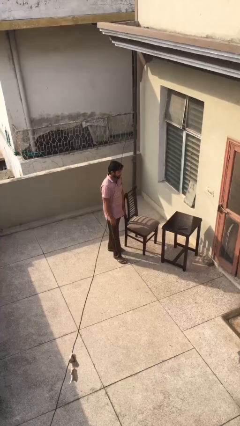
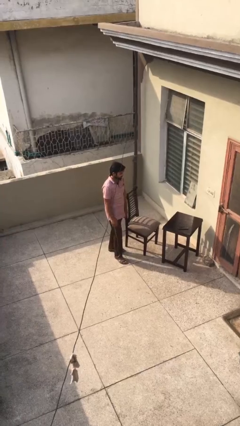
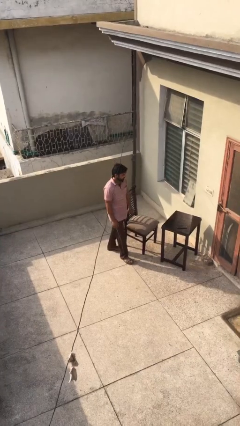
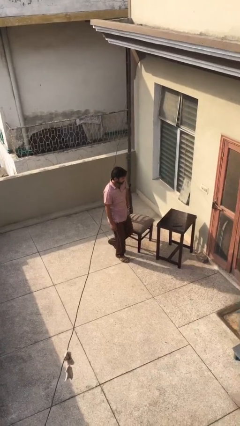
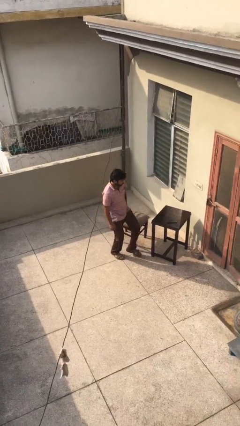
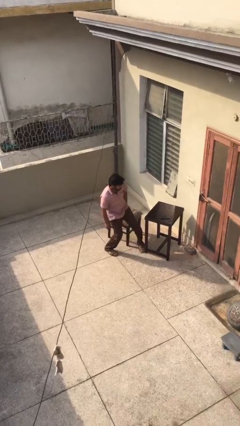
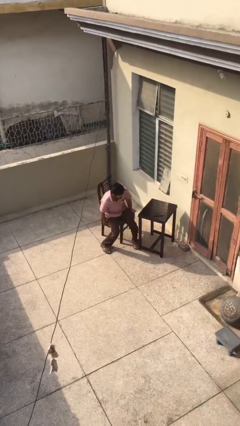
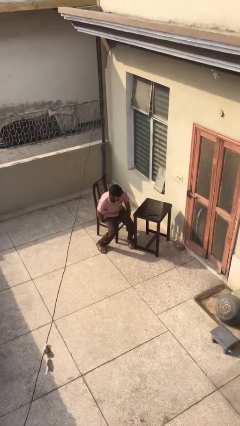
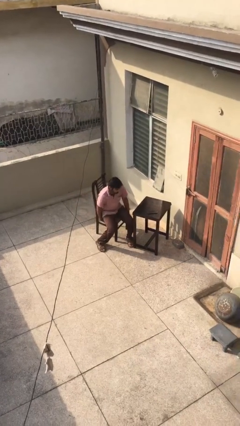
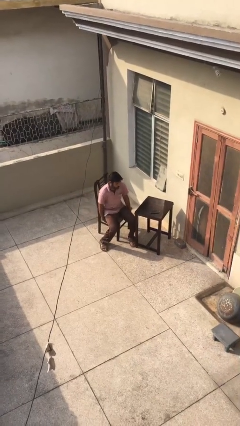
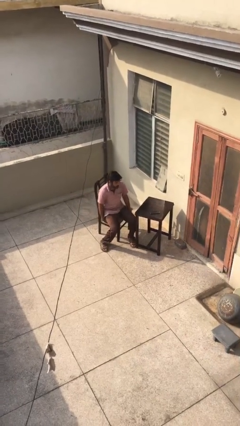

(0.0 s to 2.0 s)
person sits down

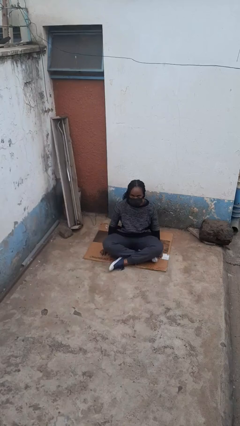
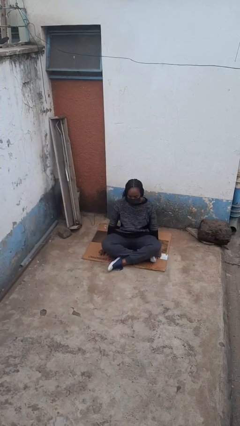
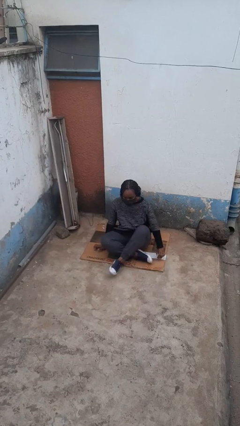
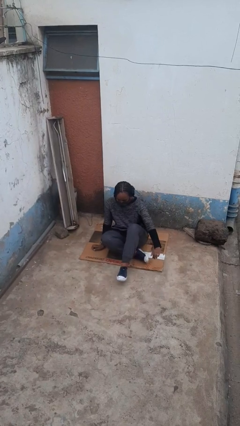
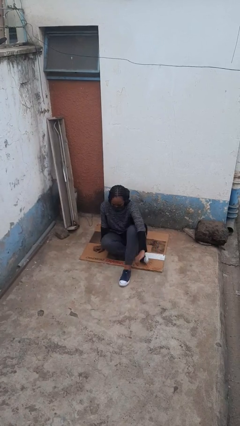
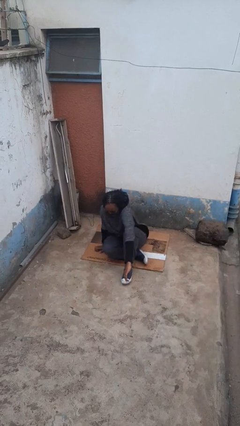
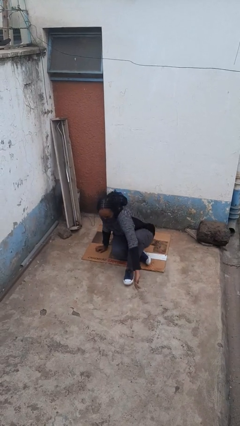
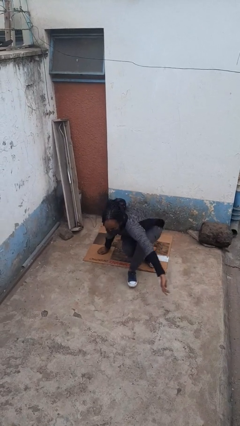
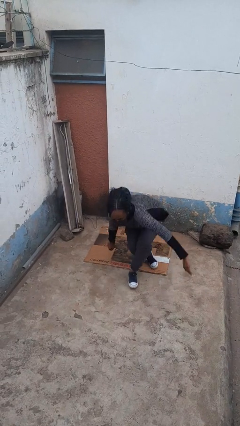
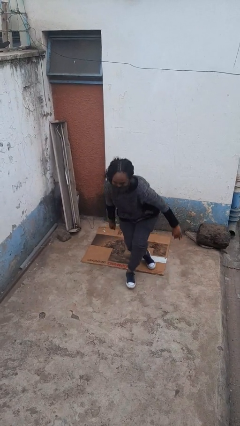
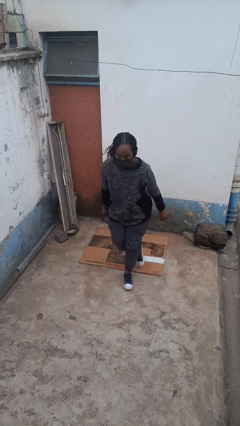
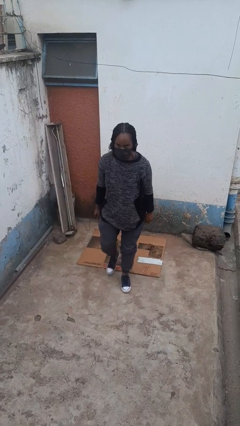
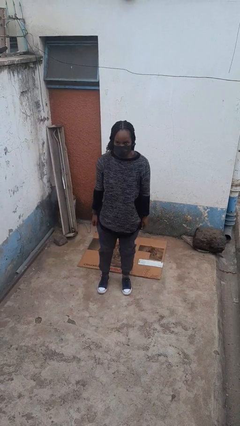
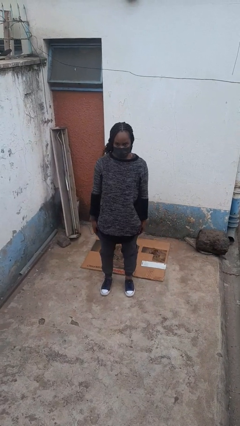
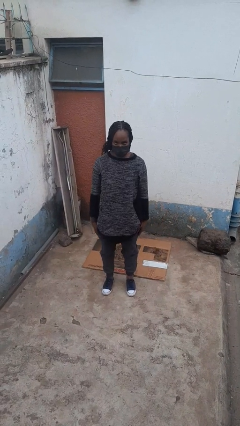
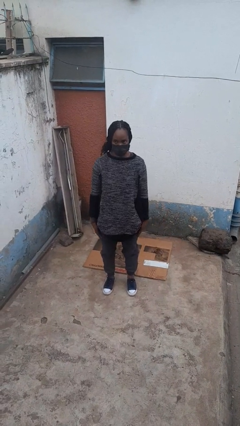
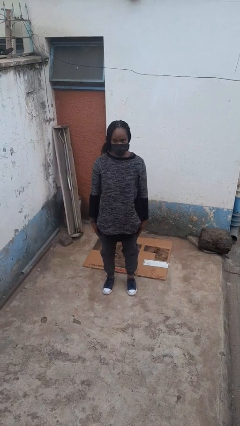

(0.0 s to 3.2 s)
person stands up from floor

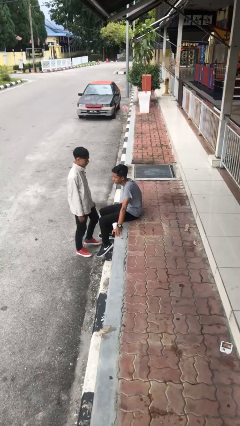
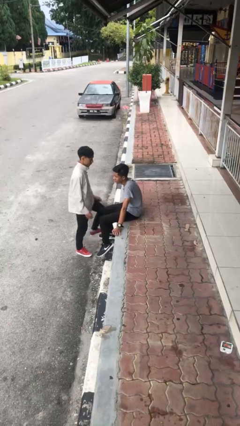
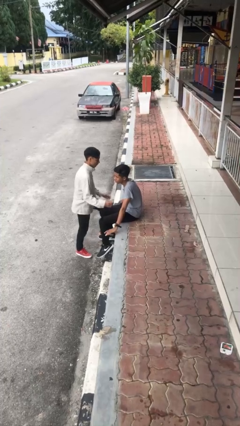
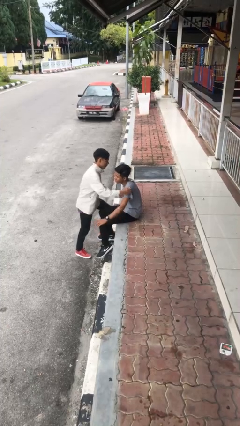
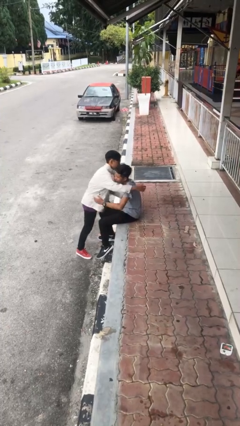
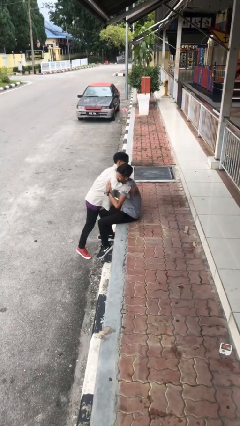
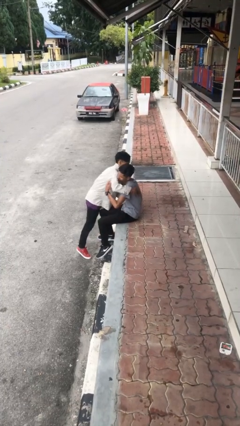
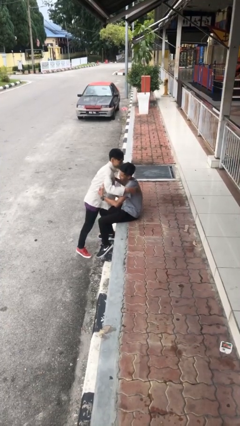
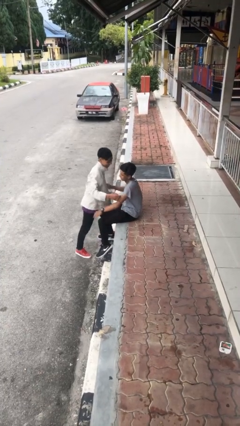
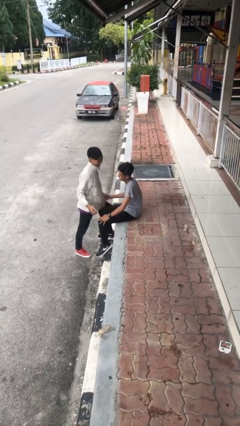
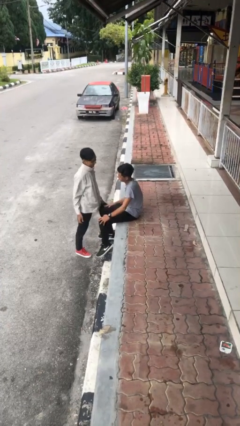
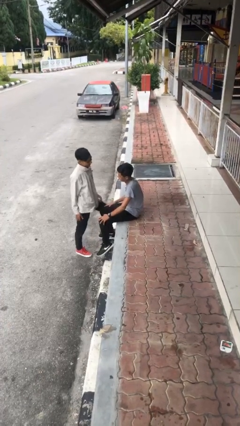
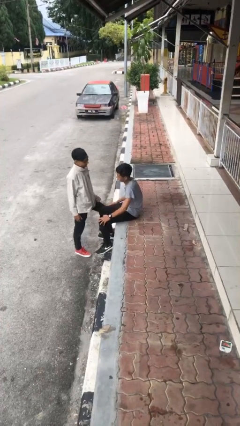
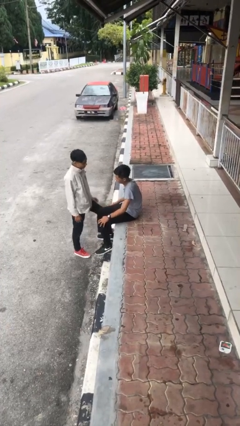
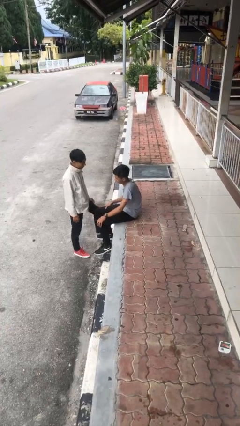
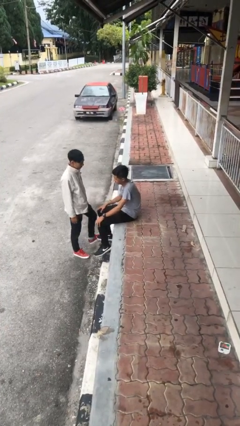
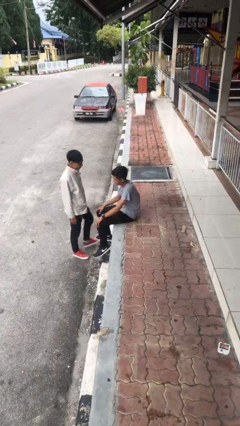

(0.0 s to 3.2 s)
person embraces person

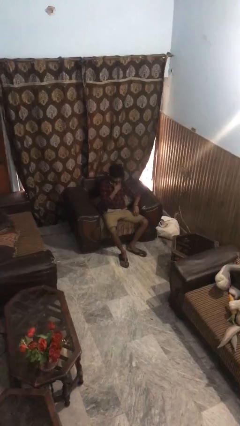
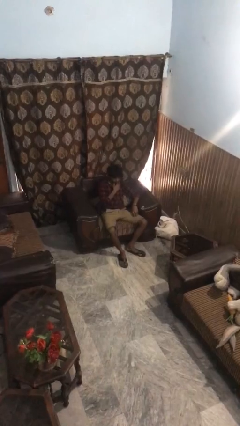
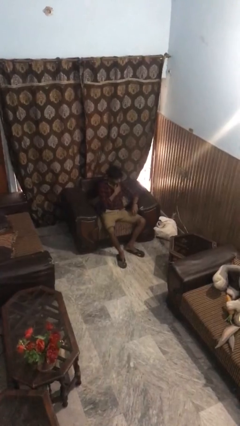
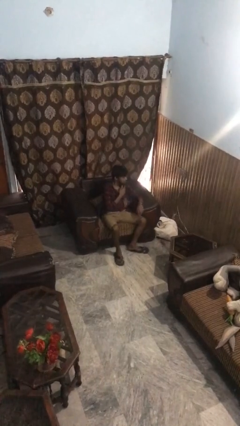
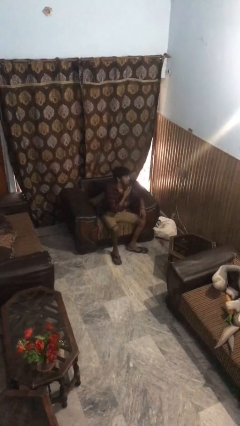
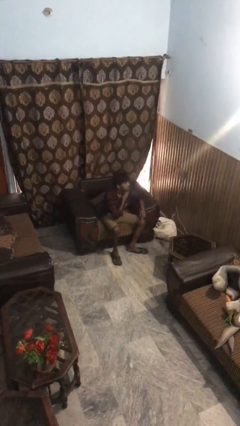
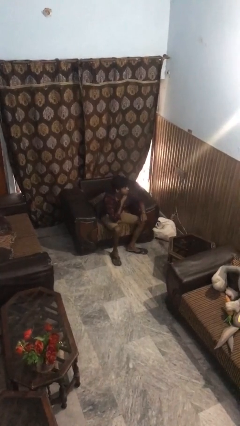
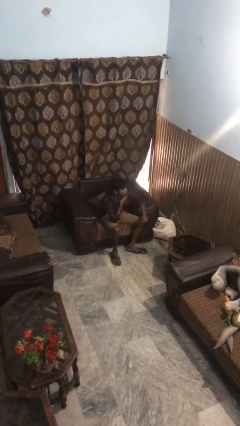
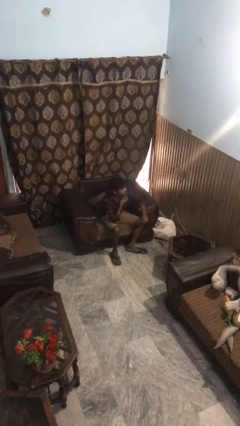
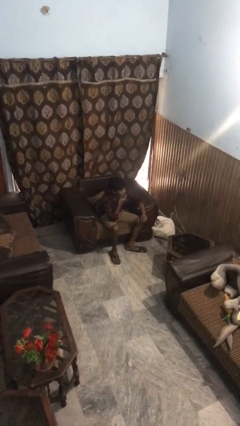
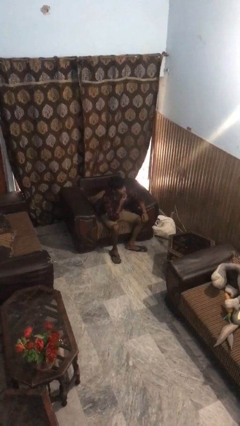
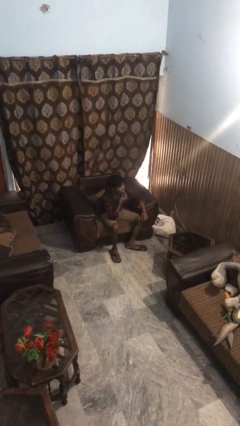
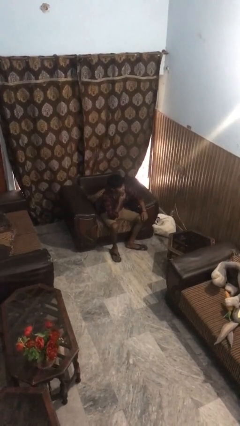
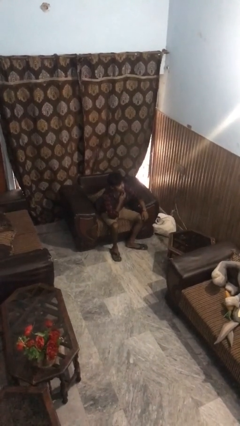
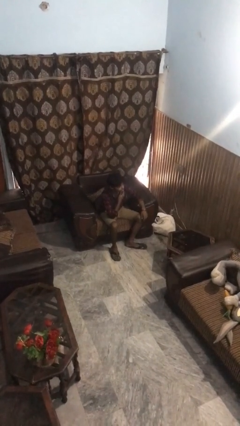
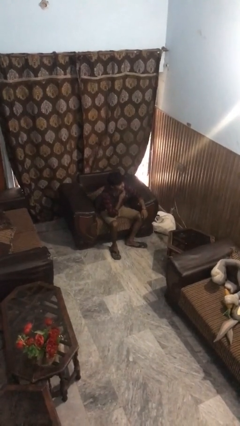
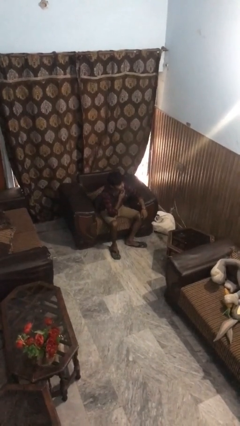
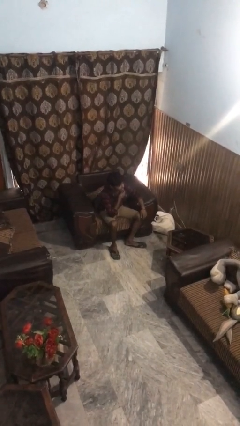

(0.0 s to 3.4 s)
person strokes chin

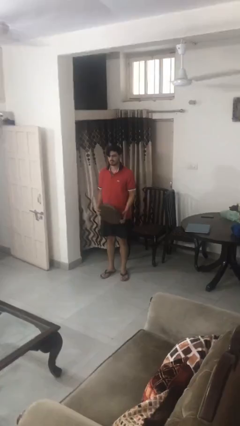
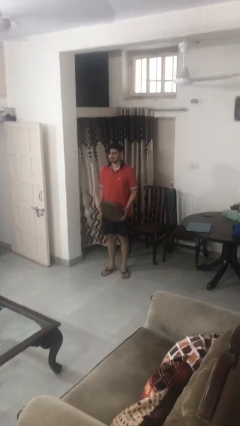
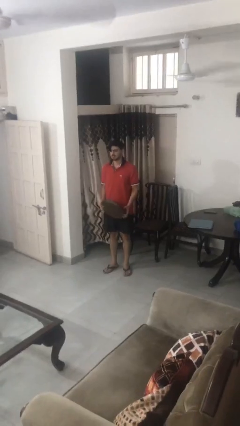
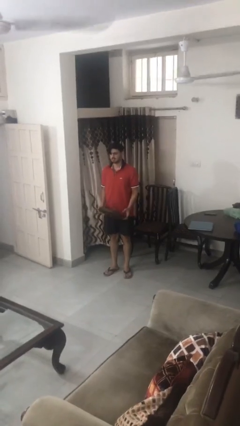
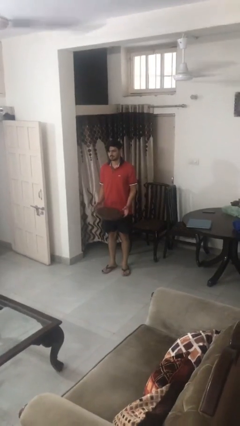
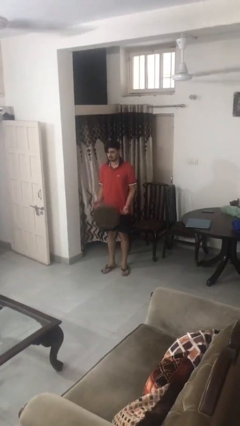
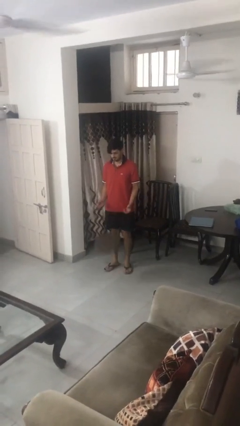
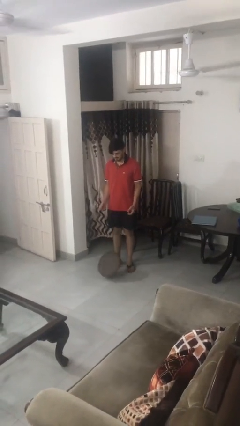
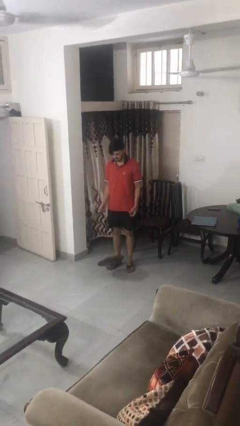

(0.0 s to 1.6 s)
person drops object

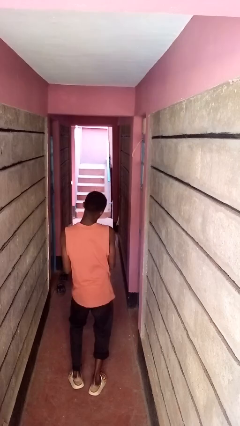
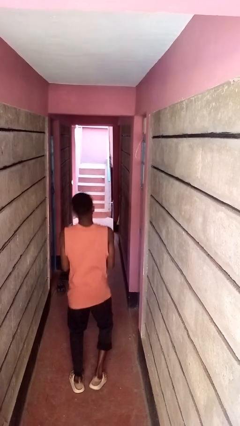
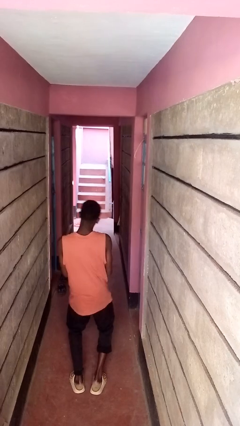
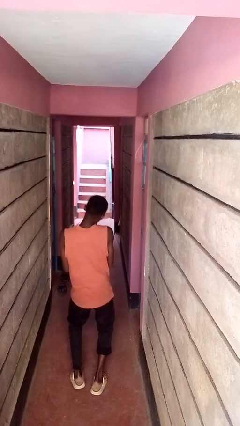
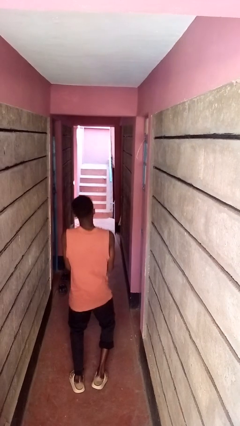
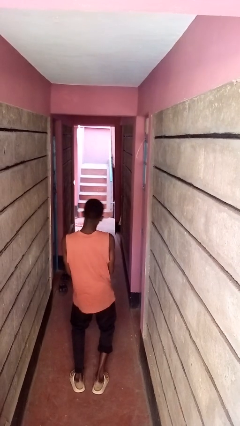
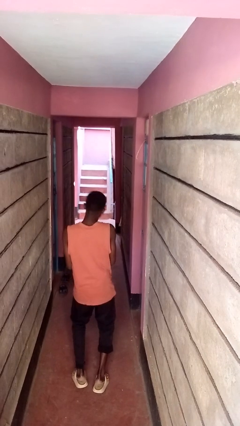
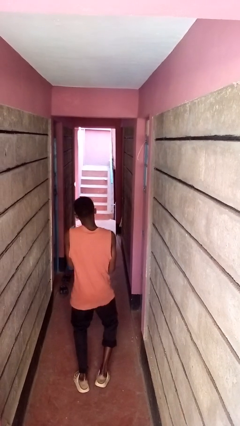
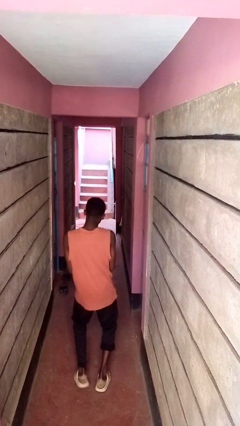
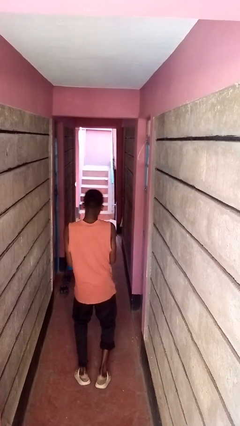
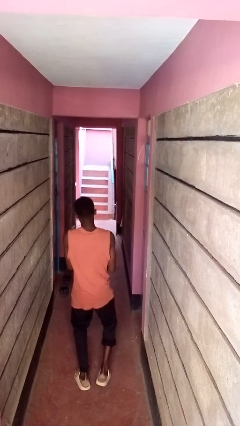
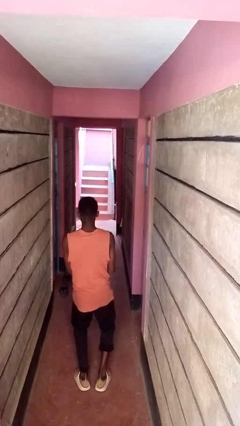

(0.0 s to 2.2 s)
person dances in place

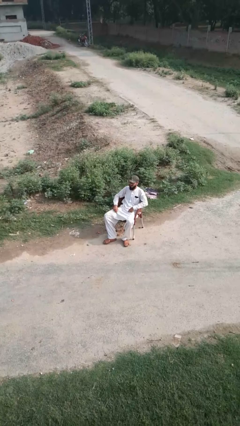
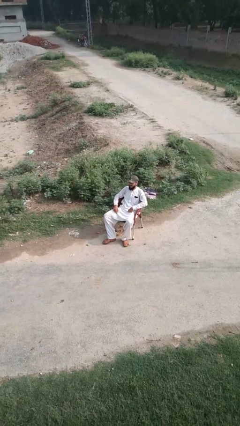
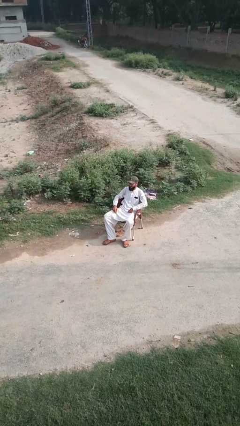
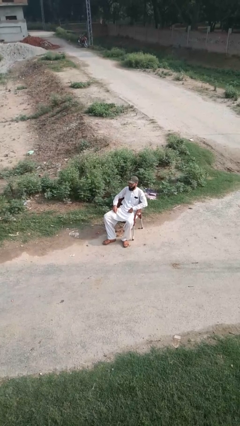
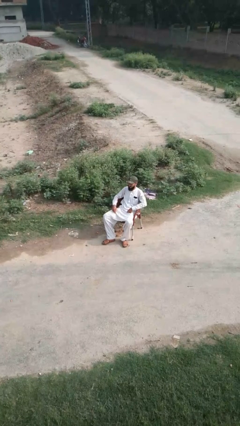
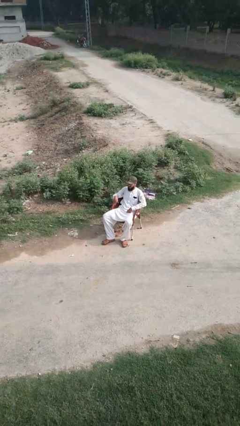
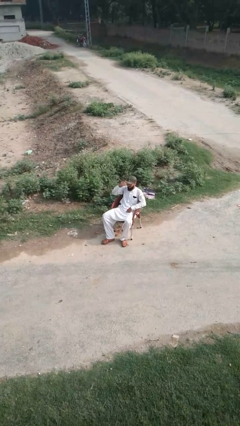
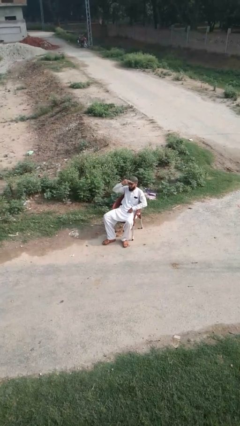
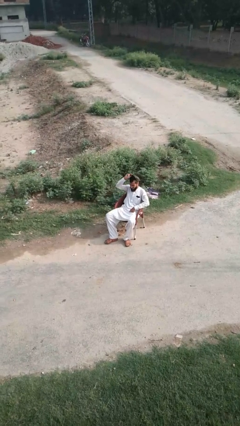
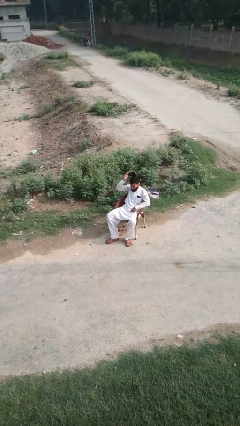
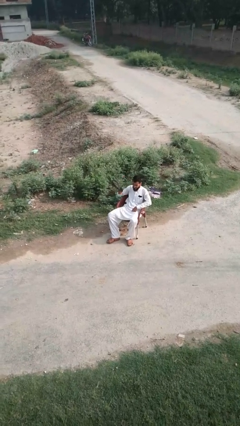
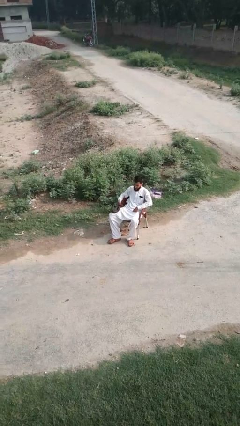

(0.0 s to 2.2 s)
person takes off hat
